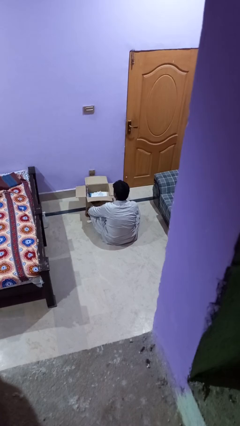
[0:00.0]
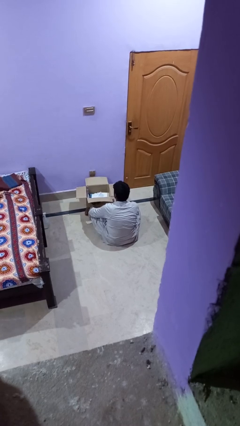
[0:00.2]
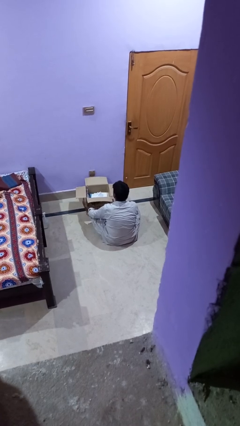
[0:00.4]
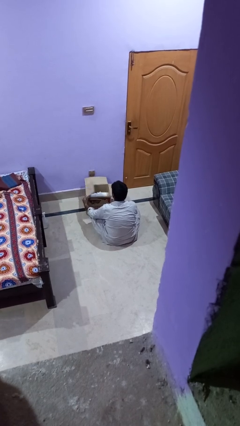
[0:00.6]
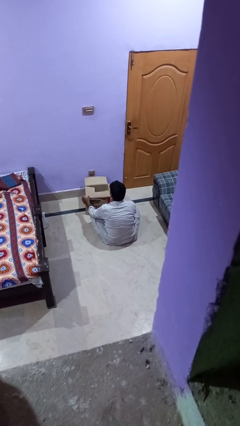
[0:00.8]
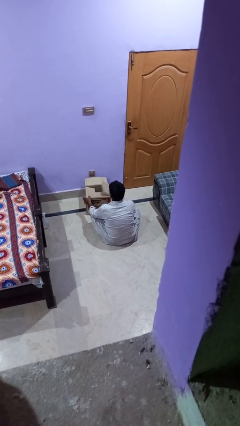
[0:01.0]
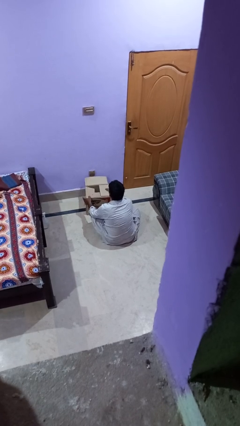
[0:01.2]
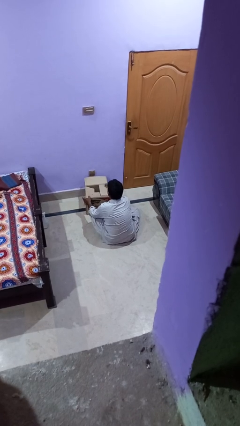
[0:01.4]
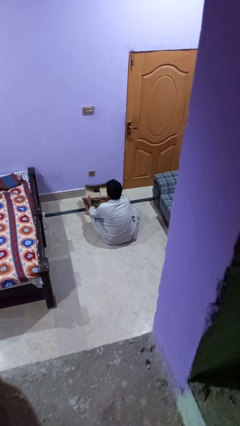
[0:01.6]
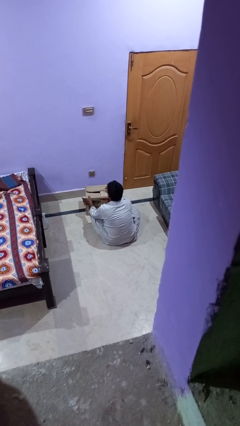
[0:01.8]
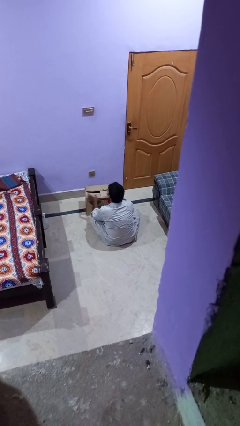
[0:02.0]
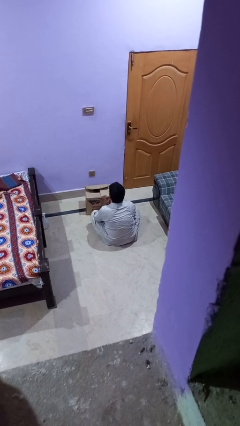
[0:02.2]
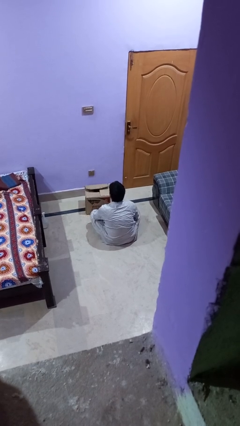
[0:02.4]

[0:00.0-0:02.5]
person closes box

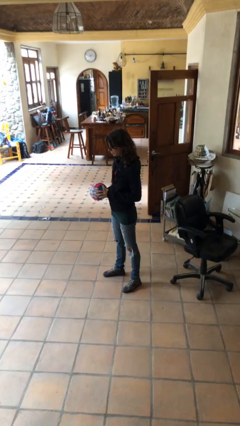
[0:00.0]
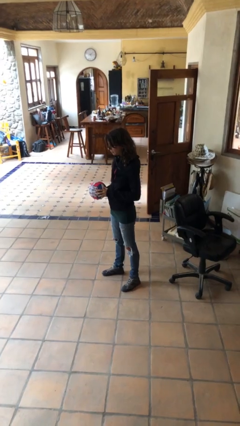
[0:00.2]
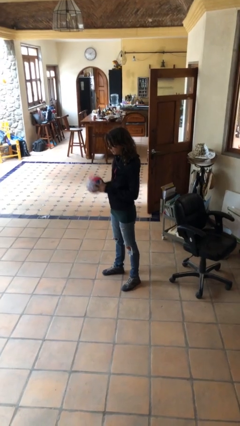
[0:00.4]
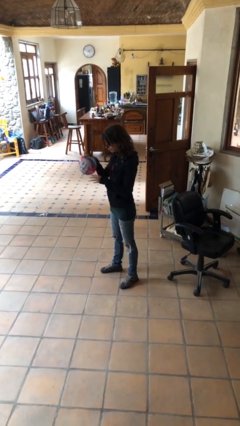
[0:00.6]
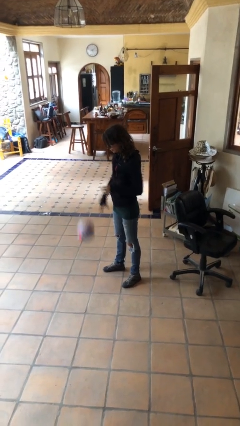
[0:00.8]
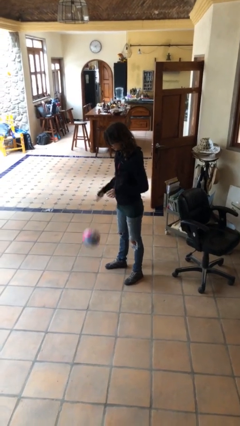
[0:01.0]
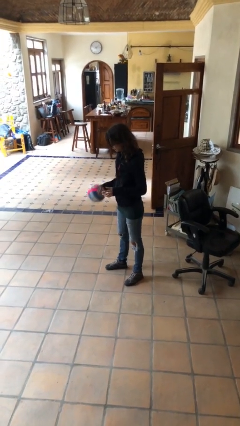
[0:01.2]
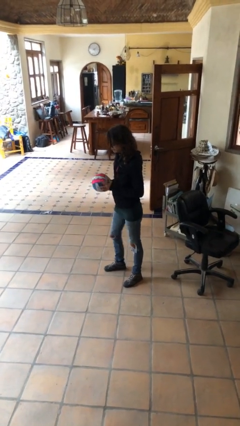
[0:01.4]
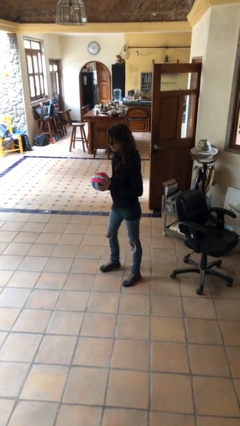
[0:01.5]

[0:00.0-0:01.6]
person bounces ball on floor

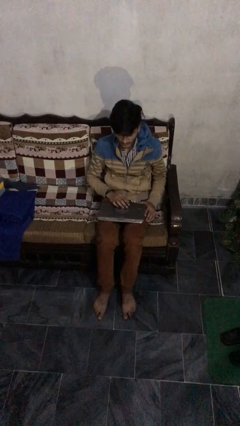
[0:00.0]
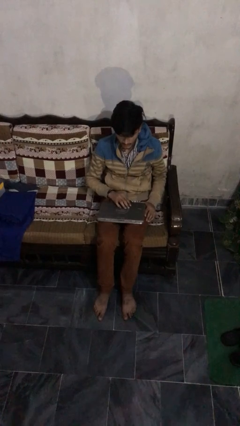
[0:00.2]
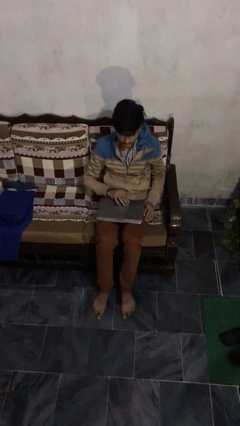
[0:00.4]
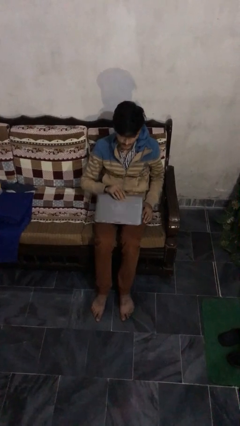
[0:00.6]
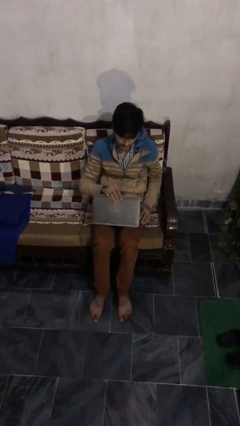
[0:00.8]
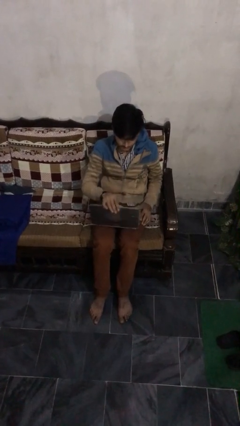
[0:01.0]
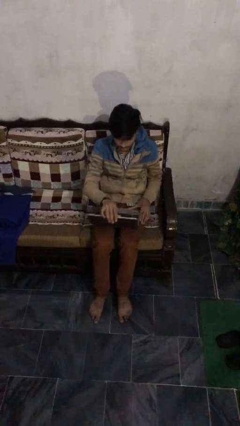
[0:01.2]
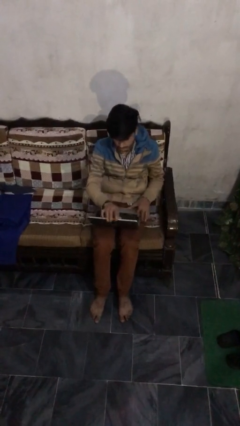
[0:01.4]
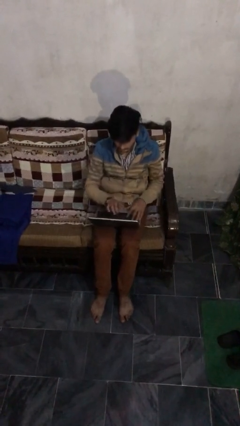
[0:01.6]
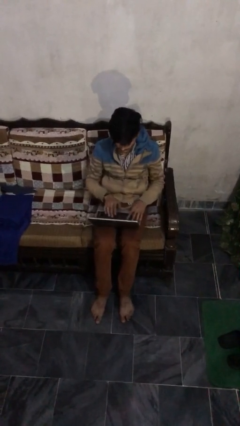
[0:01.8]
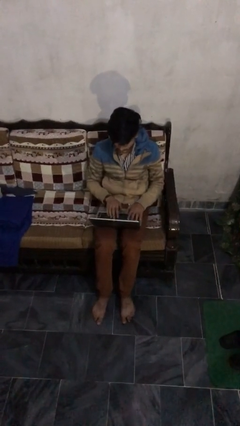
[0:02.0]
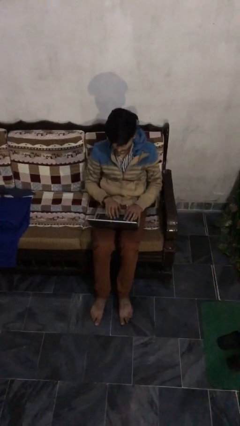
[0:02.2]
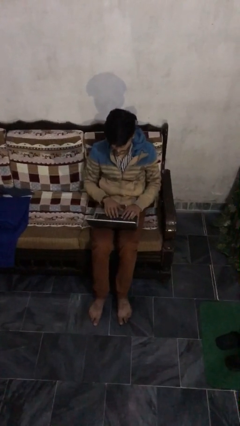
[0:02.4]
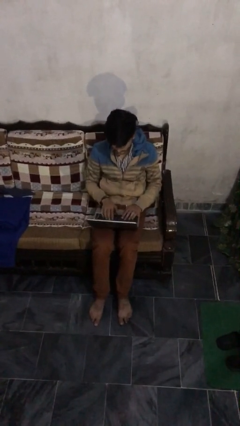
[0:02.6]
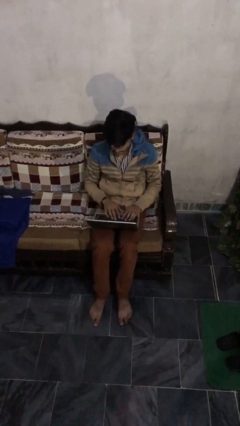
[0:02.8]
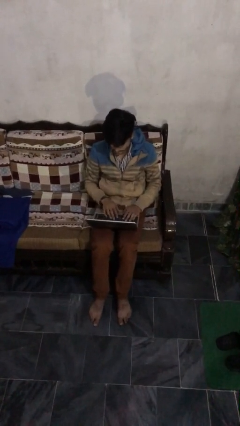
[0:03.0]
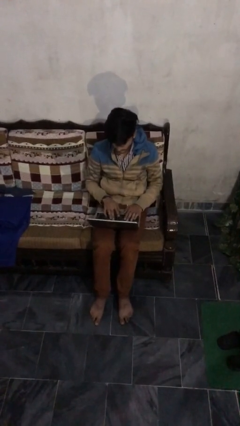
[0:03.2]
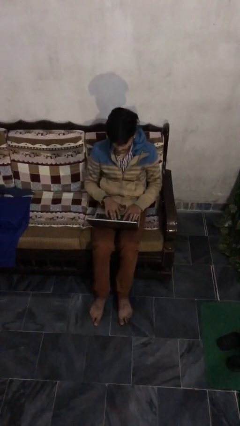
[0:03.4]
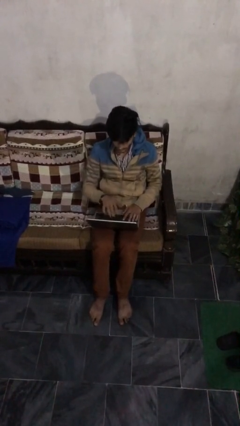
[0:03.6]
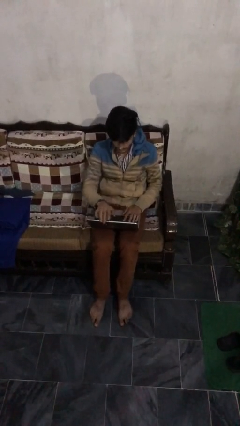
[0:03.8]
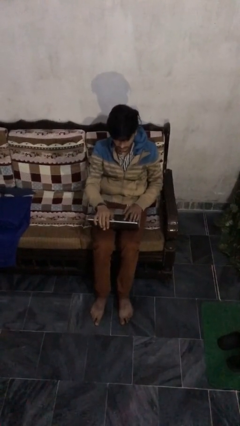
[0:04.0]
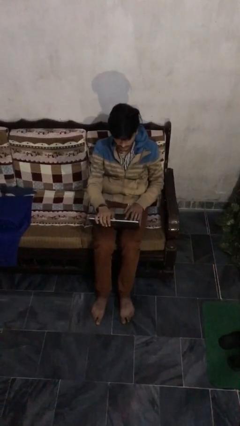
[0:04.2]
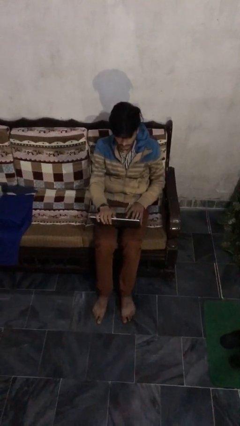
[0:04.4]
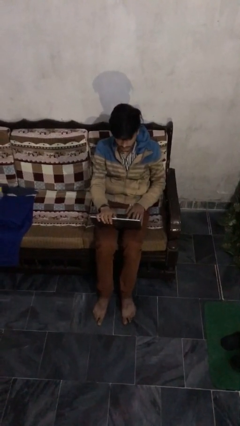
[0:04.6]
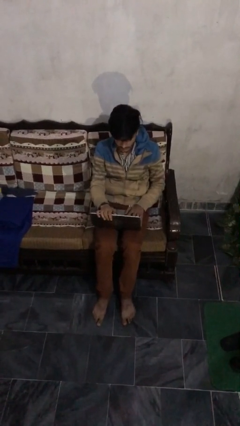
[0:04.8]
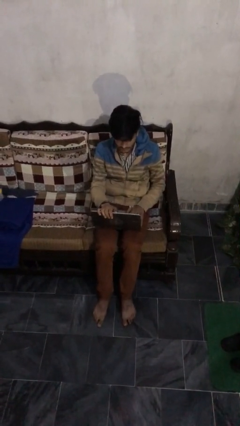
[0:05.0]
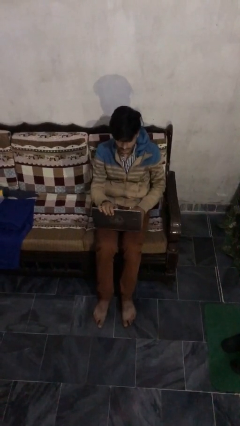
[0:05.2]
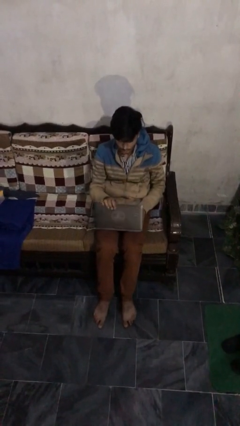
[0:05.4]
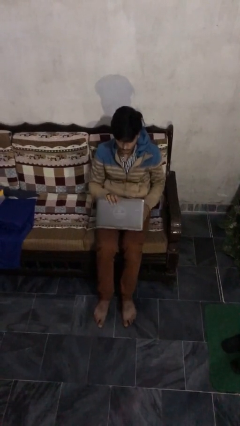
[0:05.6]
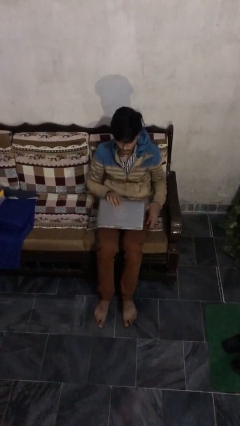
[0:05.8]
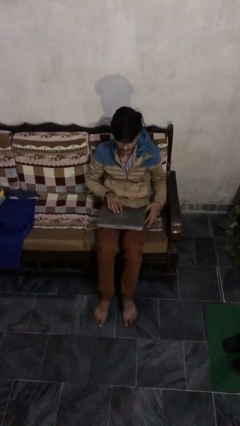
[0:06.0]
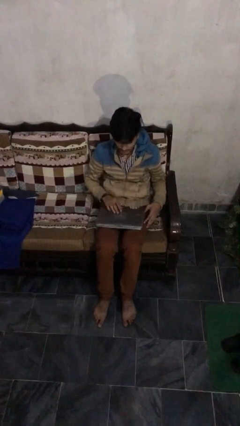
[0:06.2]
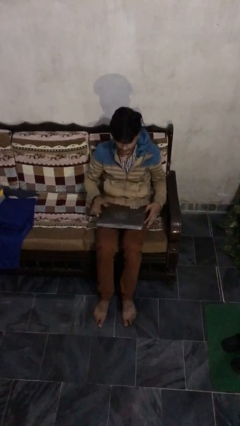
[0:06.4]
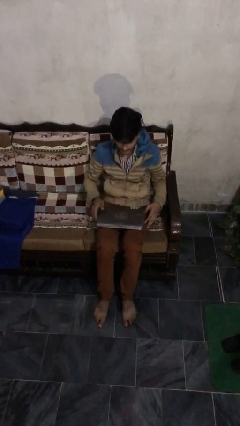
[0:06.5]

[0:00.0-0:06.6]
person interacts with laptop

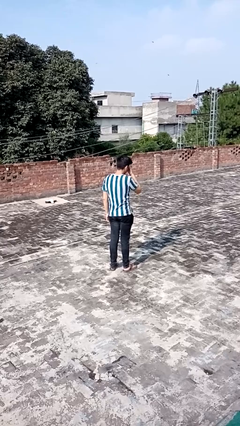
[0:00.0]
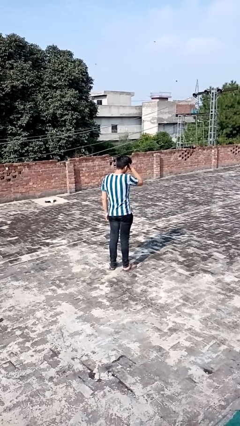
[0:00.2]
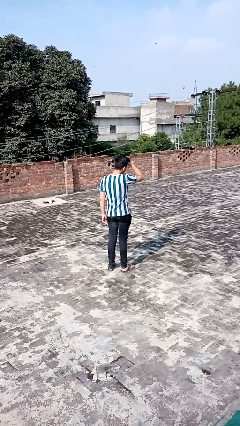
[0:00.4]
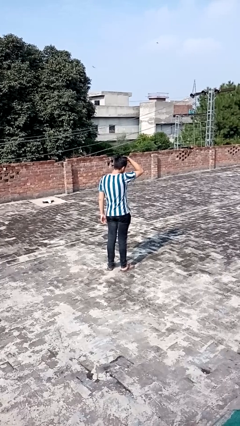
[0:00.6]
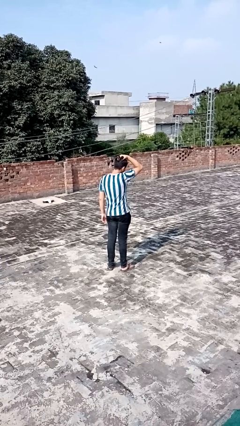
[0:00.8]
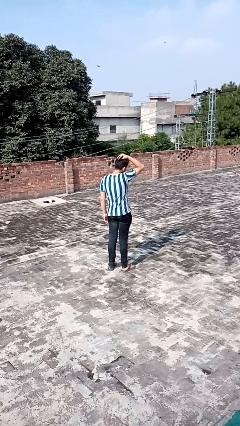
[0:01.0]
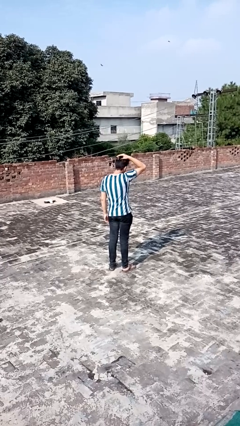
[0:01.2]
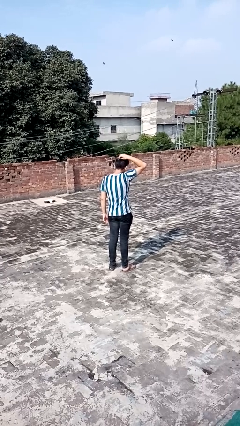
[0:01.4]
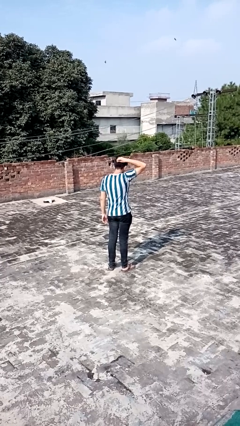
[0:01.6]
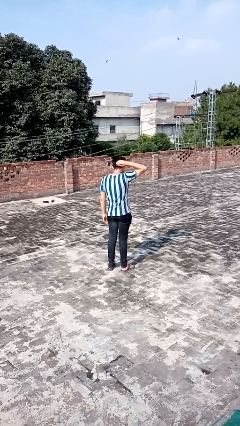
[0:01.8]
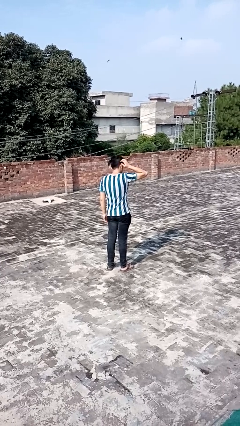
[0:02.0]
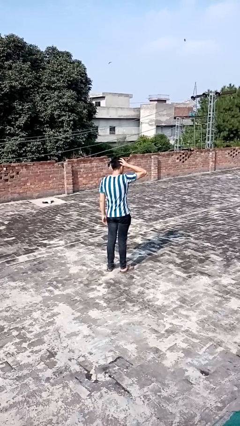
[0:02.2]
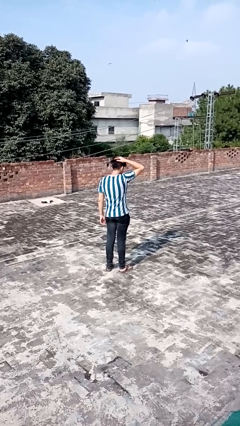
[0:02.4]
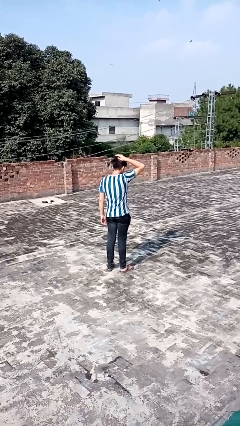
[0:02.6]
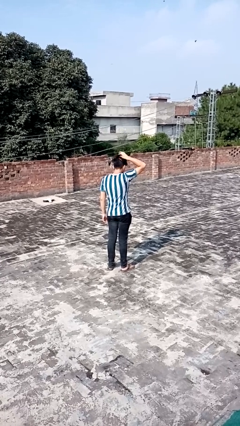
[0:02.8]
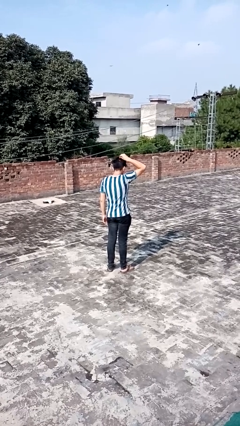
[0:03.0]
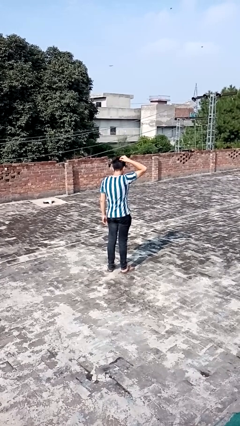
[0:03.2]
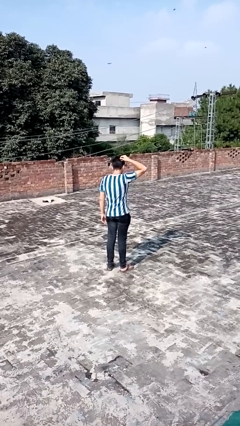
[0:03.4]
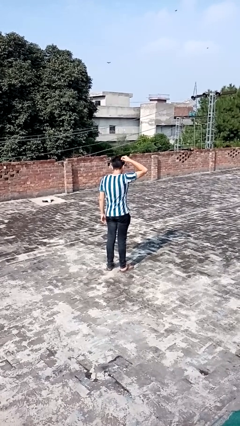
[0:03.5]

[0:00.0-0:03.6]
person strokes hair

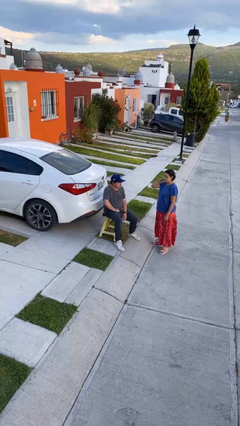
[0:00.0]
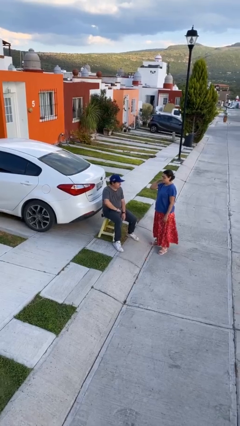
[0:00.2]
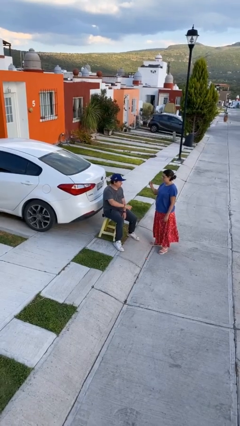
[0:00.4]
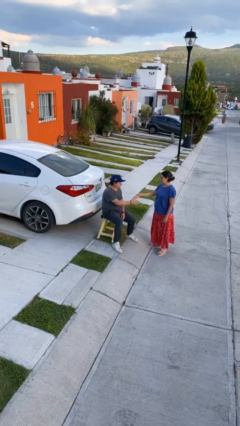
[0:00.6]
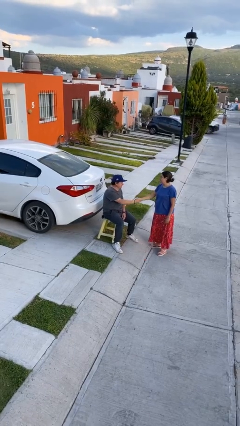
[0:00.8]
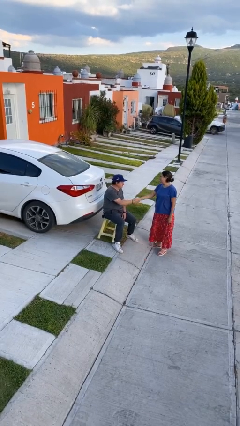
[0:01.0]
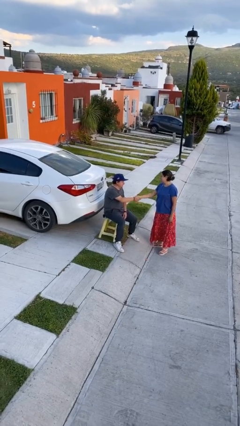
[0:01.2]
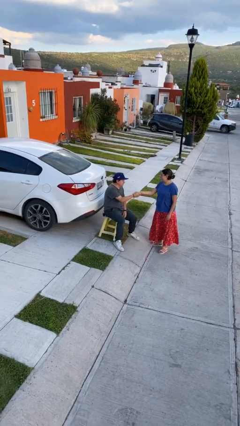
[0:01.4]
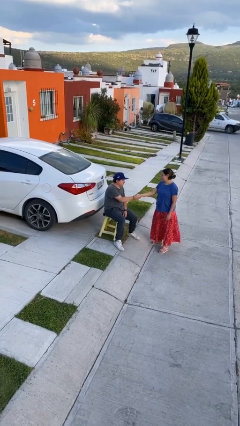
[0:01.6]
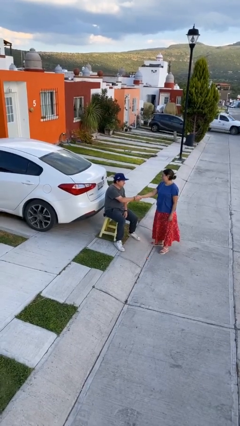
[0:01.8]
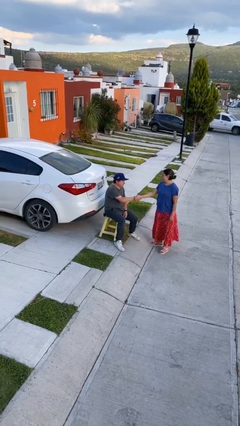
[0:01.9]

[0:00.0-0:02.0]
person shakes hand

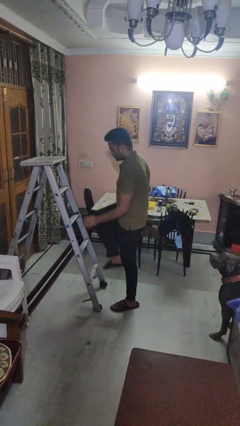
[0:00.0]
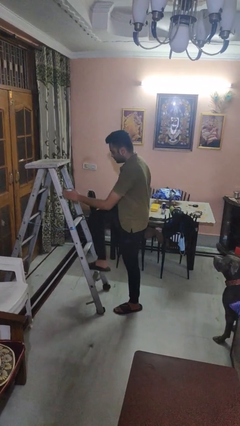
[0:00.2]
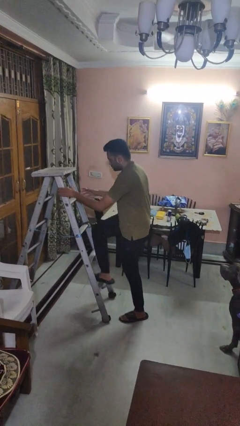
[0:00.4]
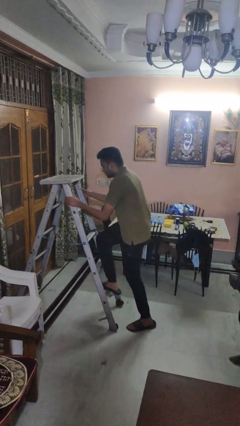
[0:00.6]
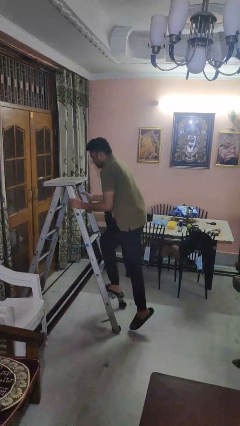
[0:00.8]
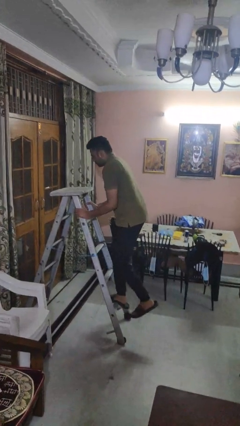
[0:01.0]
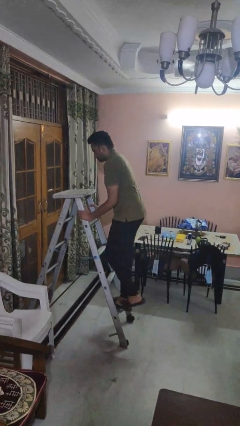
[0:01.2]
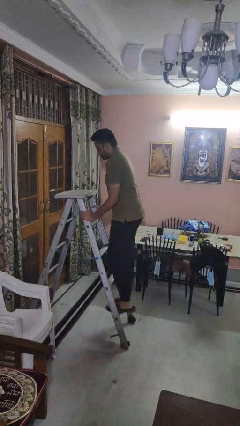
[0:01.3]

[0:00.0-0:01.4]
person climbs up ladder
